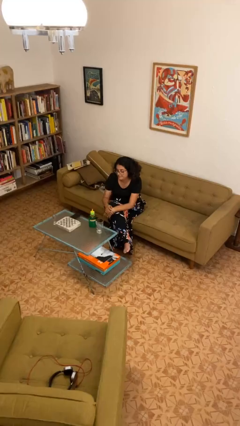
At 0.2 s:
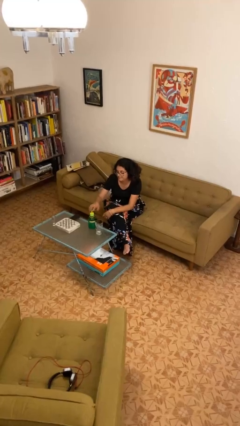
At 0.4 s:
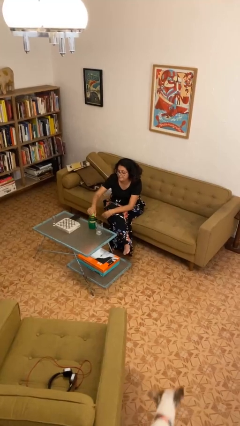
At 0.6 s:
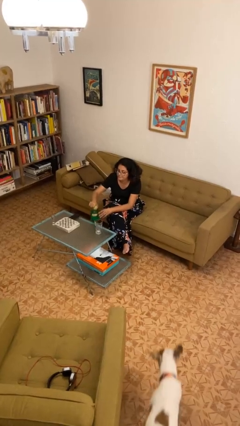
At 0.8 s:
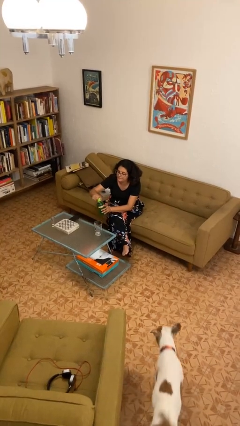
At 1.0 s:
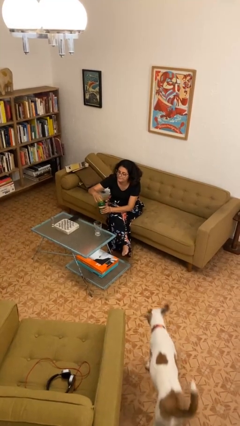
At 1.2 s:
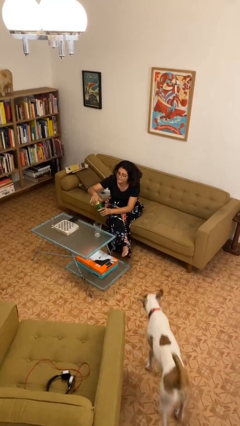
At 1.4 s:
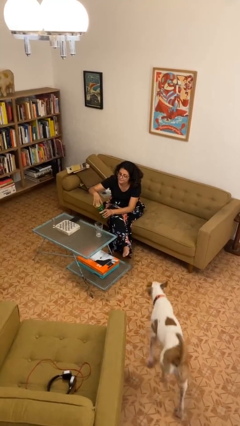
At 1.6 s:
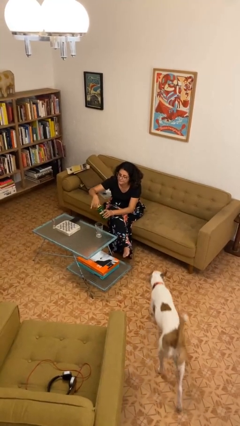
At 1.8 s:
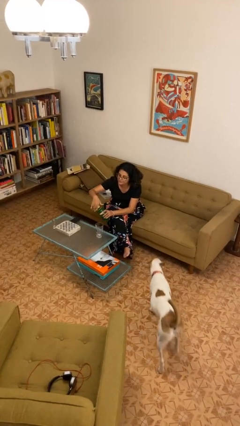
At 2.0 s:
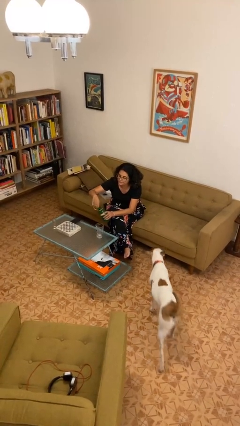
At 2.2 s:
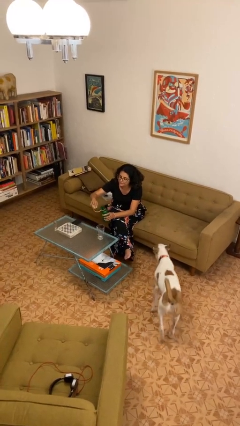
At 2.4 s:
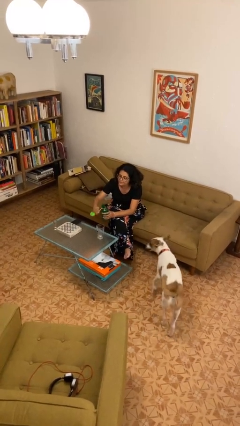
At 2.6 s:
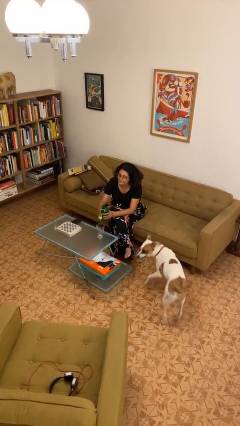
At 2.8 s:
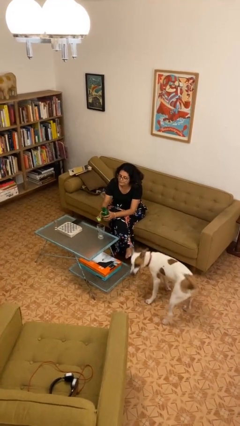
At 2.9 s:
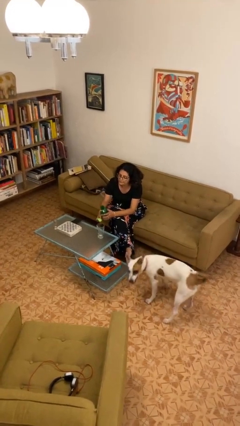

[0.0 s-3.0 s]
person unscrews lid from bottle

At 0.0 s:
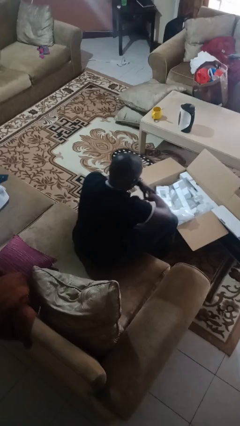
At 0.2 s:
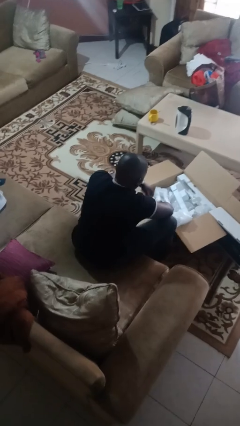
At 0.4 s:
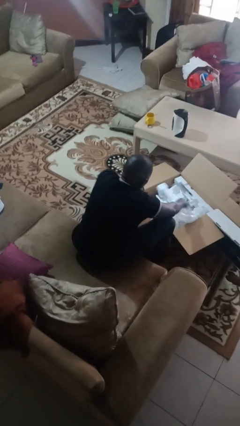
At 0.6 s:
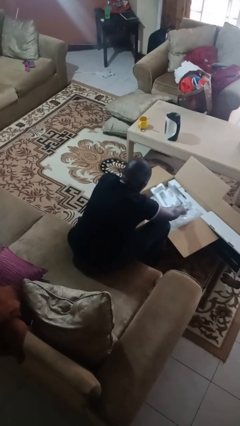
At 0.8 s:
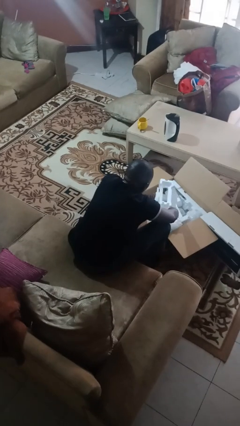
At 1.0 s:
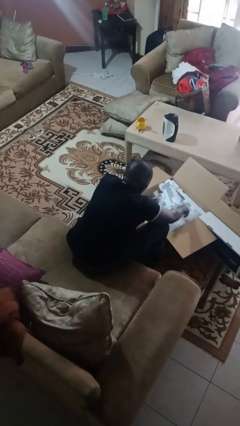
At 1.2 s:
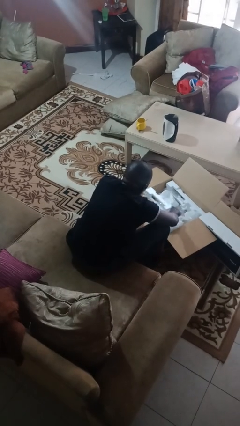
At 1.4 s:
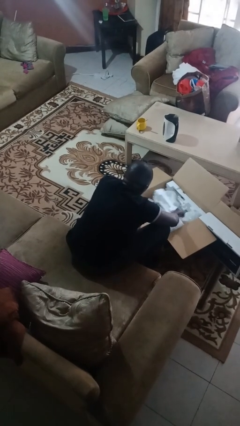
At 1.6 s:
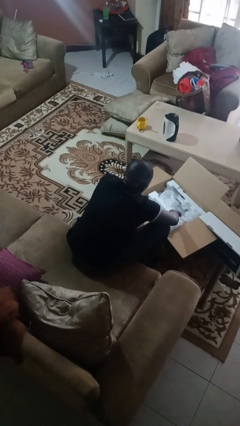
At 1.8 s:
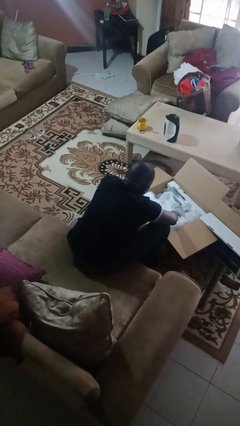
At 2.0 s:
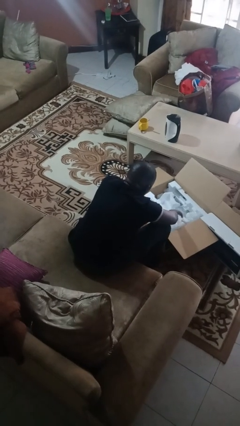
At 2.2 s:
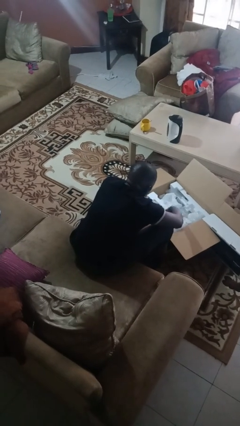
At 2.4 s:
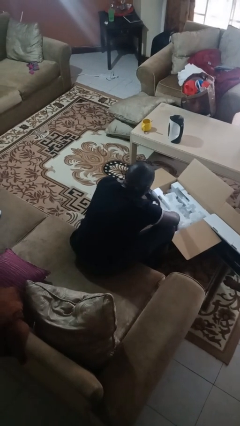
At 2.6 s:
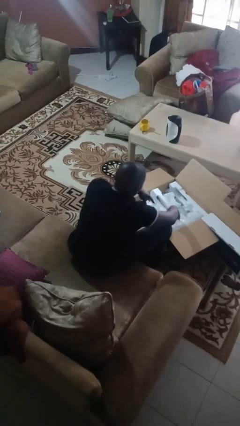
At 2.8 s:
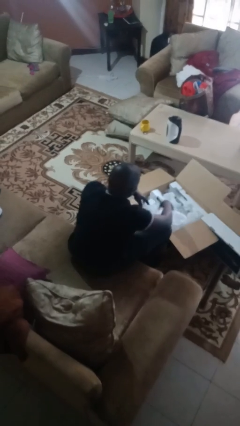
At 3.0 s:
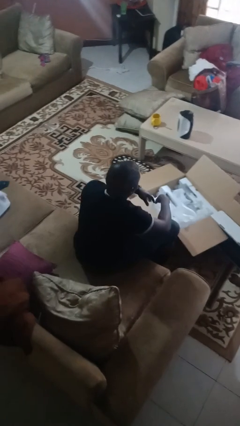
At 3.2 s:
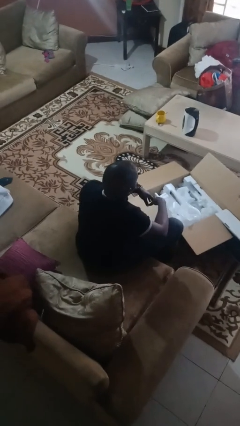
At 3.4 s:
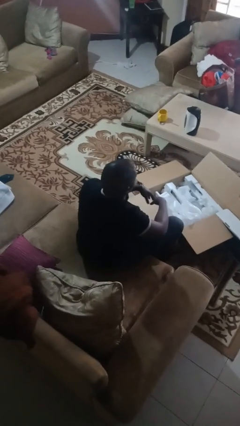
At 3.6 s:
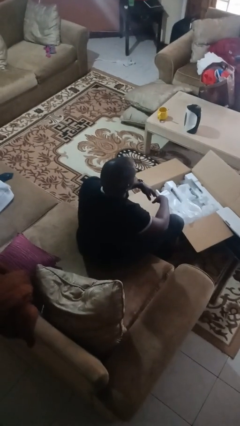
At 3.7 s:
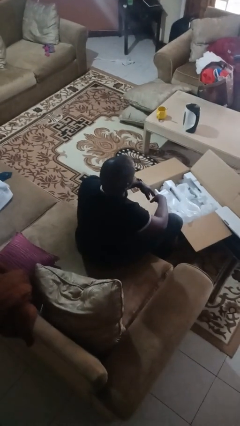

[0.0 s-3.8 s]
person searches in box

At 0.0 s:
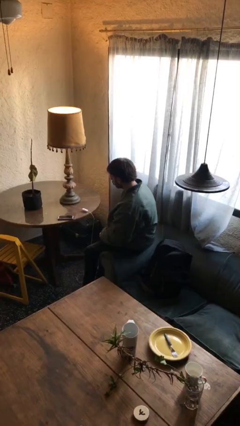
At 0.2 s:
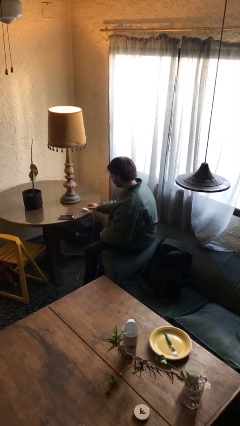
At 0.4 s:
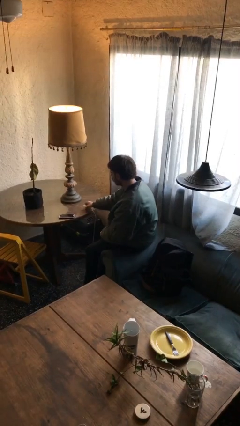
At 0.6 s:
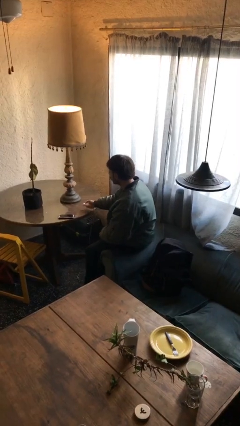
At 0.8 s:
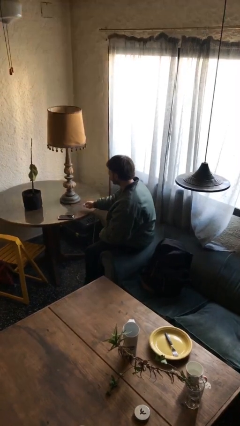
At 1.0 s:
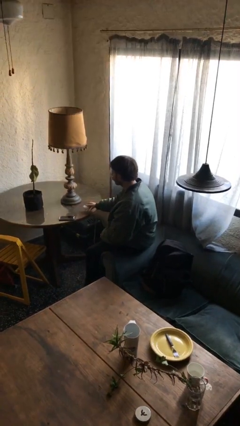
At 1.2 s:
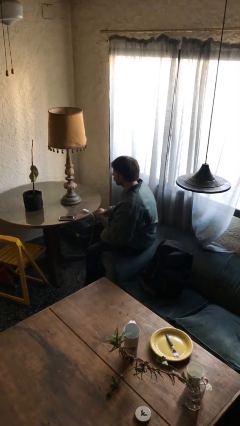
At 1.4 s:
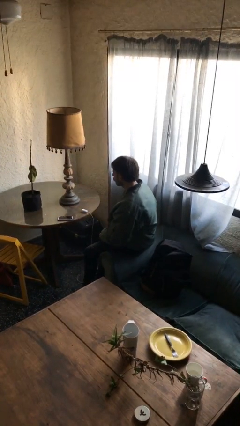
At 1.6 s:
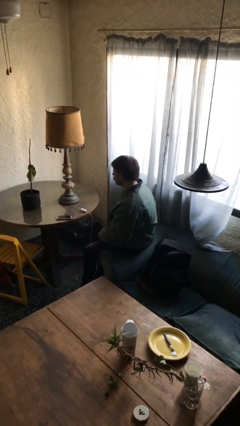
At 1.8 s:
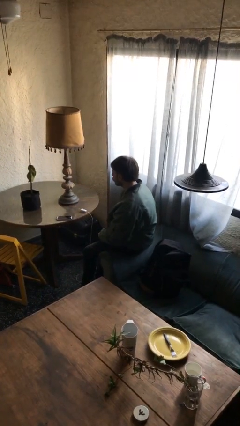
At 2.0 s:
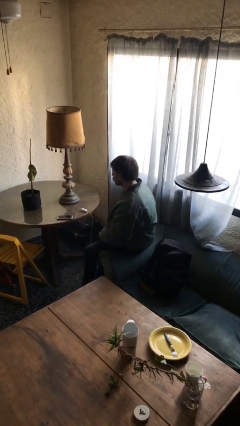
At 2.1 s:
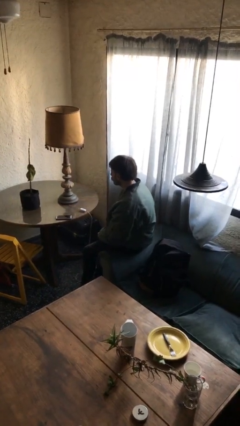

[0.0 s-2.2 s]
person turns off lamp

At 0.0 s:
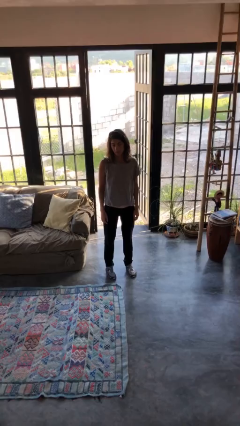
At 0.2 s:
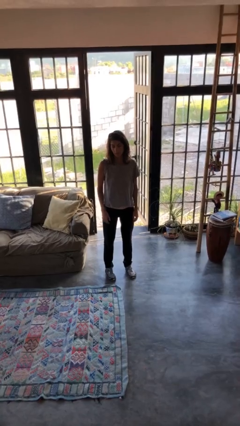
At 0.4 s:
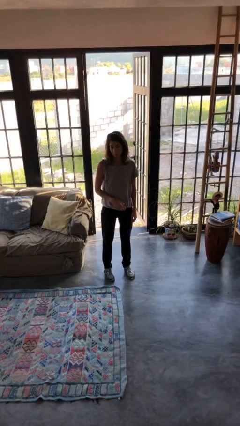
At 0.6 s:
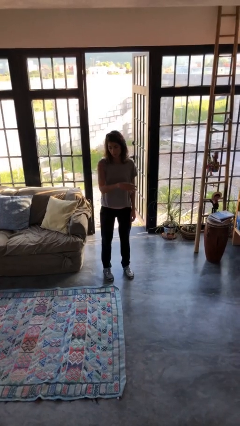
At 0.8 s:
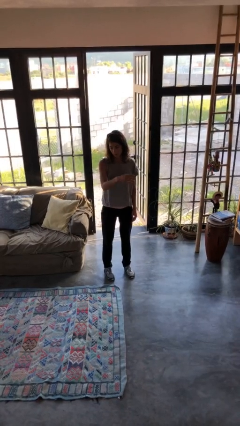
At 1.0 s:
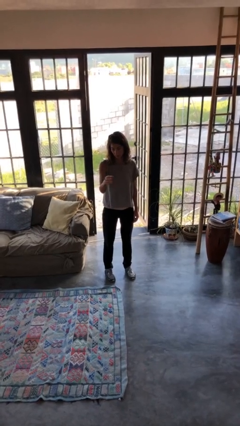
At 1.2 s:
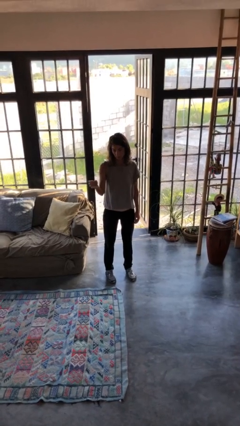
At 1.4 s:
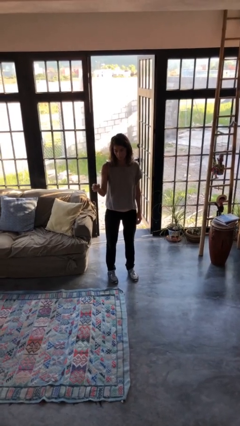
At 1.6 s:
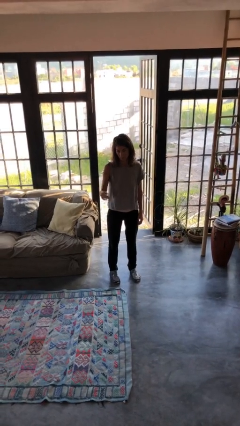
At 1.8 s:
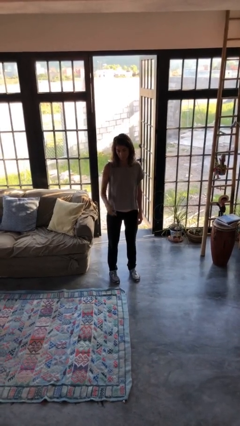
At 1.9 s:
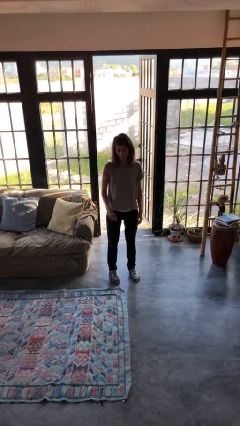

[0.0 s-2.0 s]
person gestures swipe right

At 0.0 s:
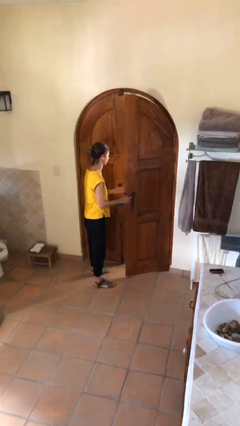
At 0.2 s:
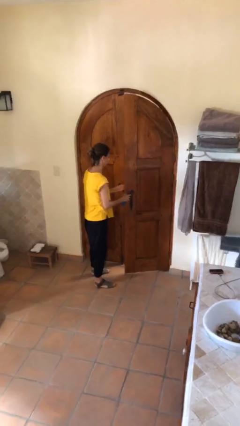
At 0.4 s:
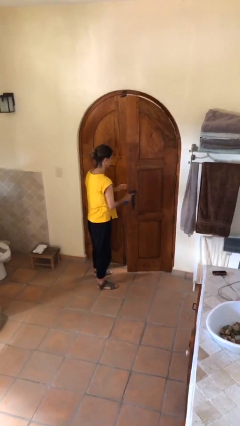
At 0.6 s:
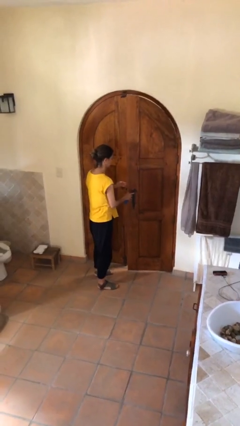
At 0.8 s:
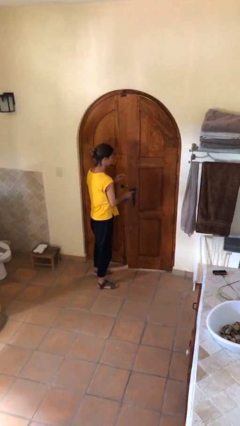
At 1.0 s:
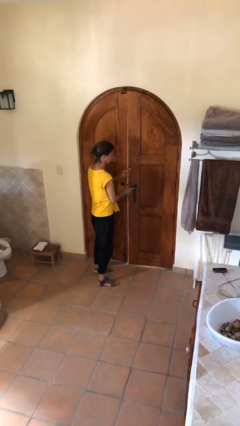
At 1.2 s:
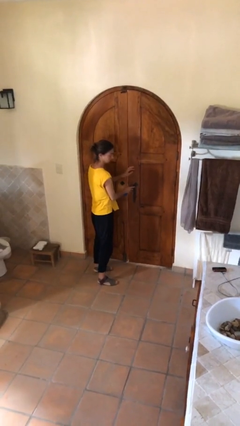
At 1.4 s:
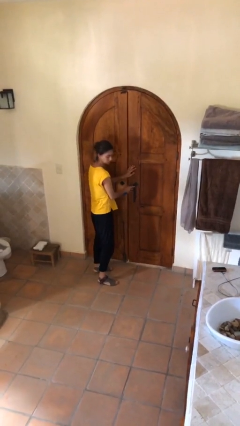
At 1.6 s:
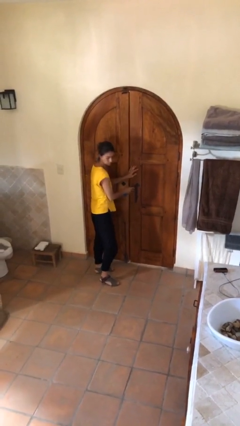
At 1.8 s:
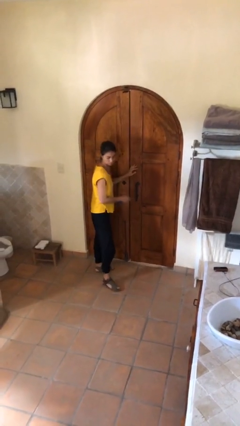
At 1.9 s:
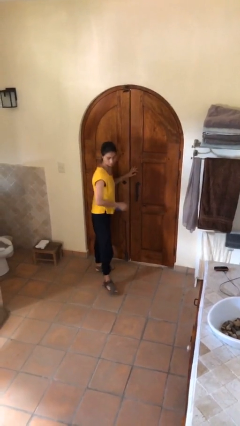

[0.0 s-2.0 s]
person closes facility door

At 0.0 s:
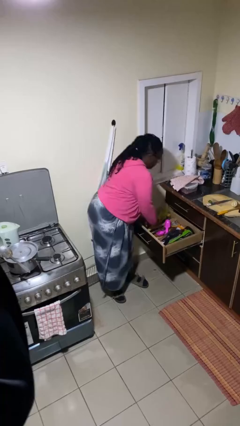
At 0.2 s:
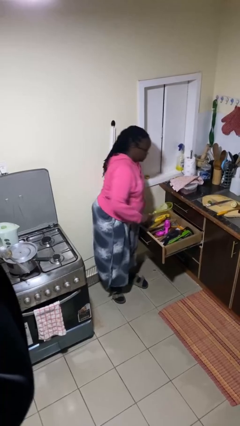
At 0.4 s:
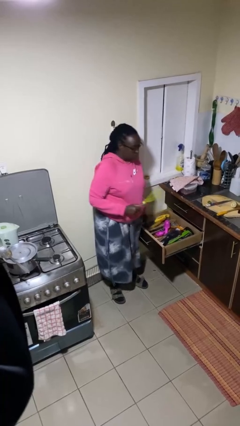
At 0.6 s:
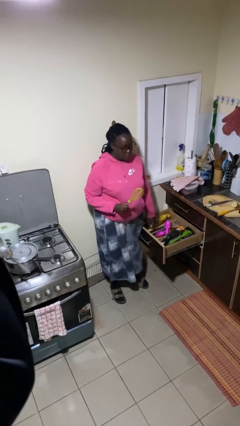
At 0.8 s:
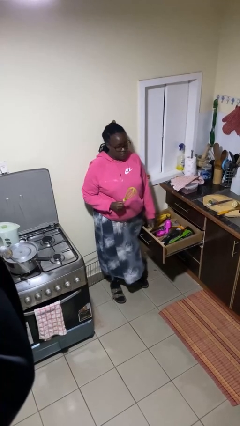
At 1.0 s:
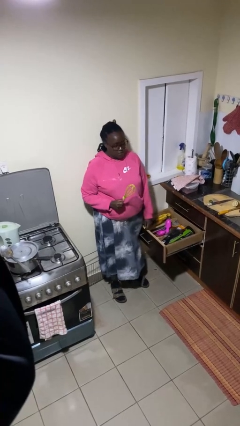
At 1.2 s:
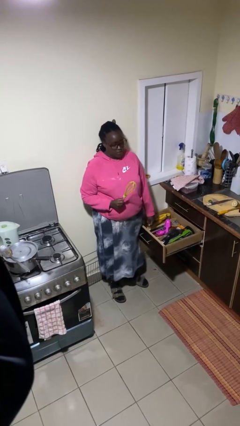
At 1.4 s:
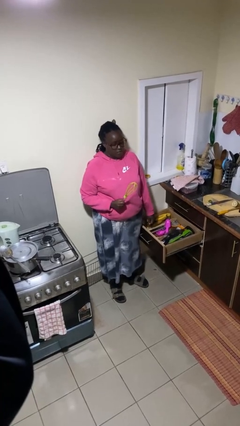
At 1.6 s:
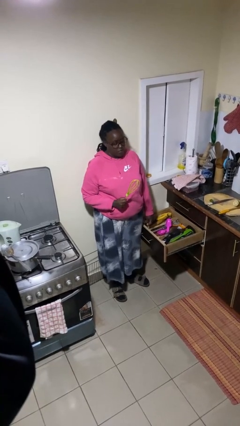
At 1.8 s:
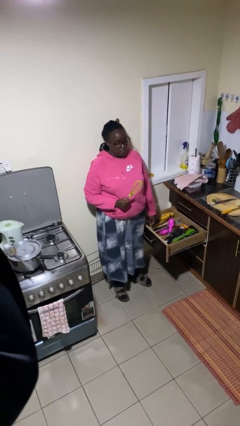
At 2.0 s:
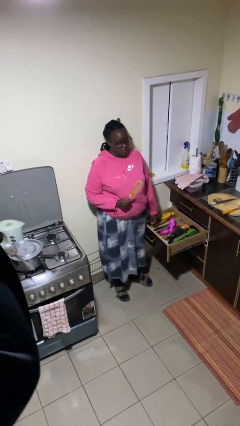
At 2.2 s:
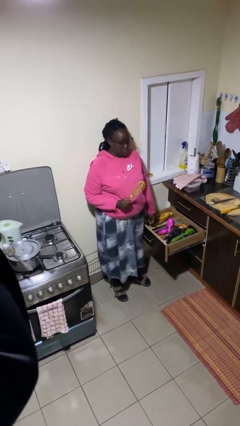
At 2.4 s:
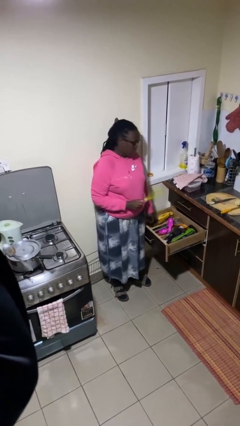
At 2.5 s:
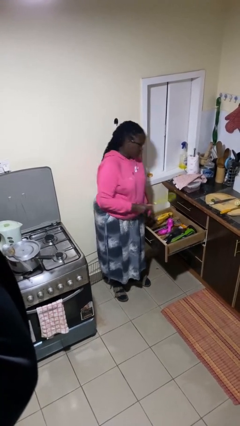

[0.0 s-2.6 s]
person takes object from kitchen drawer

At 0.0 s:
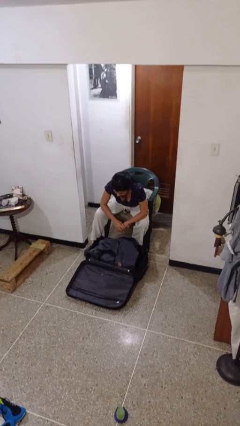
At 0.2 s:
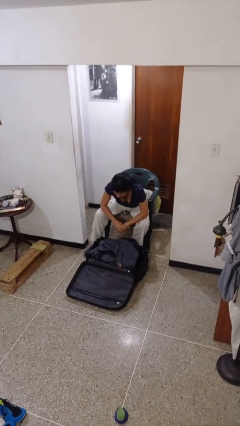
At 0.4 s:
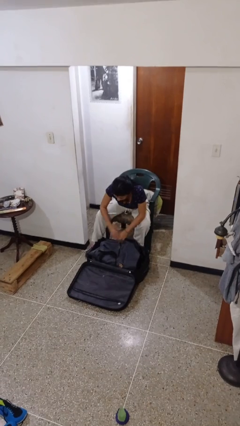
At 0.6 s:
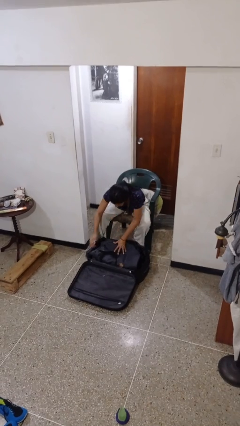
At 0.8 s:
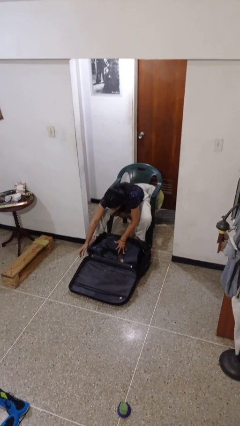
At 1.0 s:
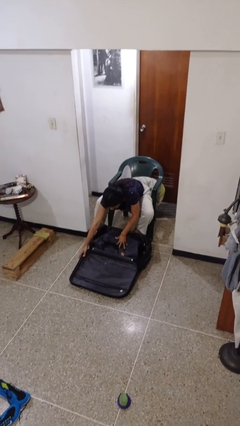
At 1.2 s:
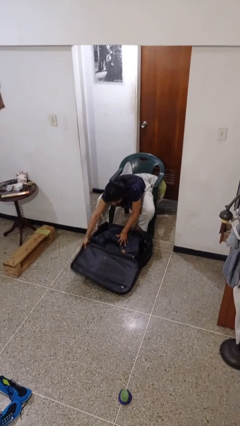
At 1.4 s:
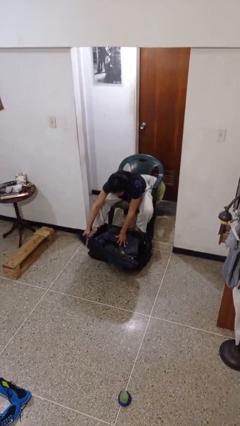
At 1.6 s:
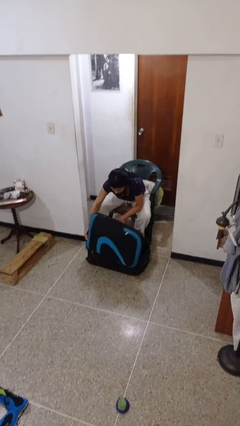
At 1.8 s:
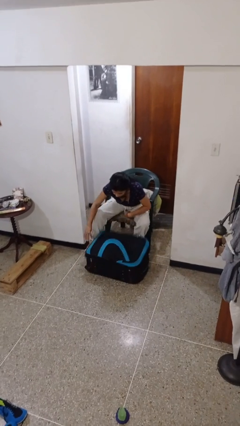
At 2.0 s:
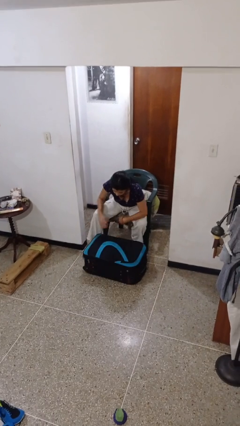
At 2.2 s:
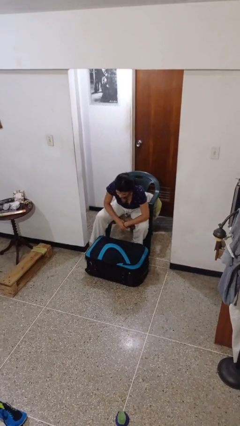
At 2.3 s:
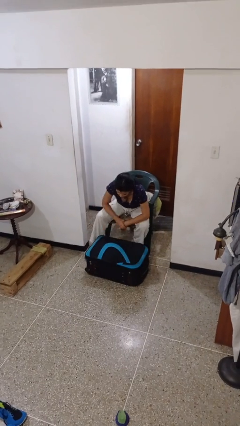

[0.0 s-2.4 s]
person closes suitcase
